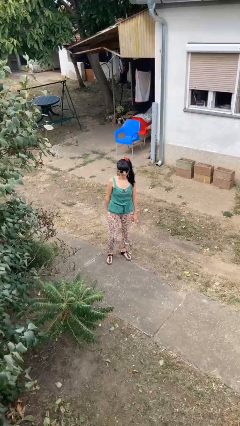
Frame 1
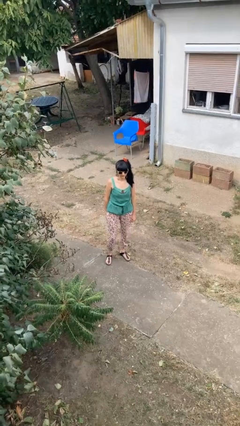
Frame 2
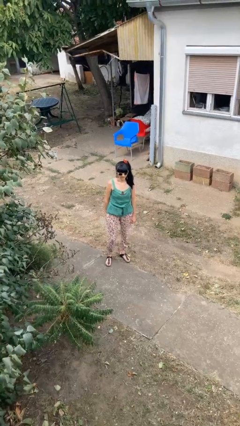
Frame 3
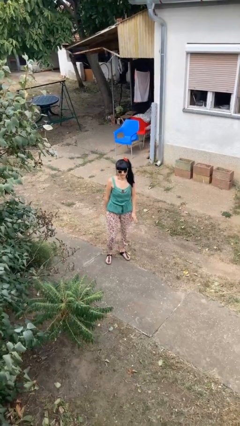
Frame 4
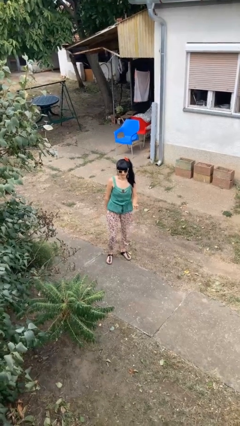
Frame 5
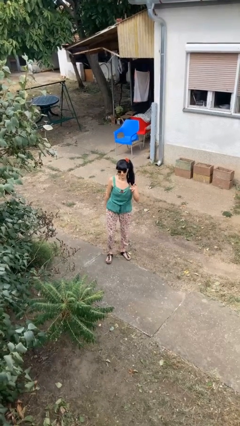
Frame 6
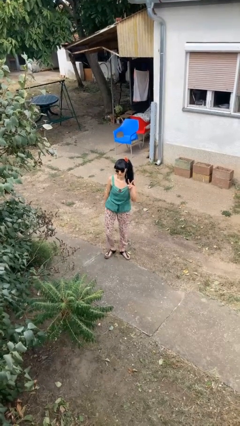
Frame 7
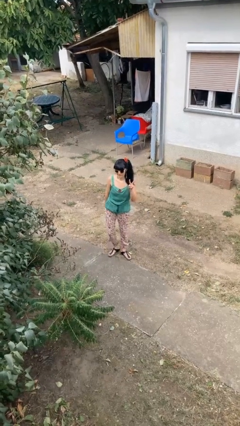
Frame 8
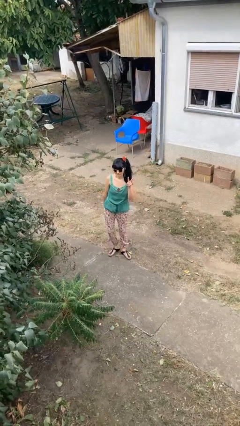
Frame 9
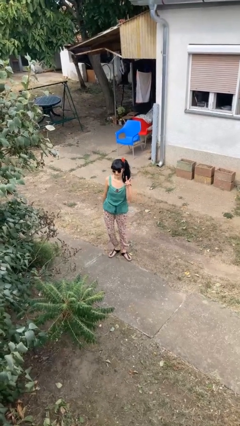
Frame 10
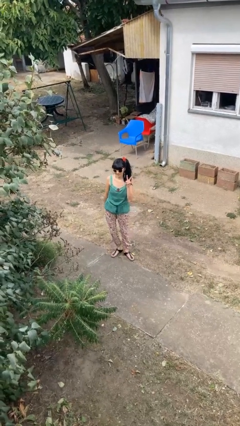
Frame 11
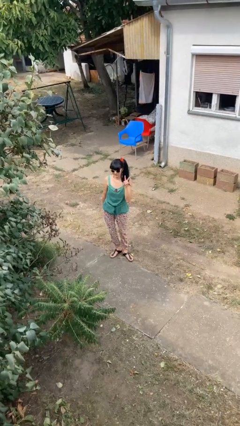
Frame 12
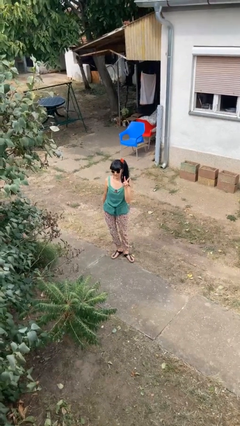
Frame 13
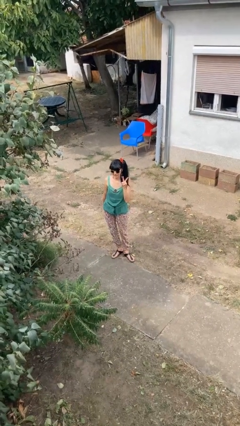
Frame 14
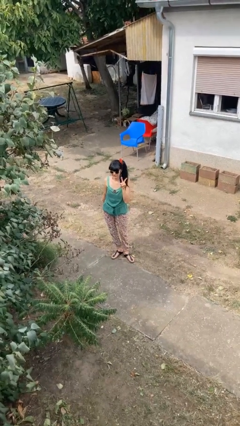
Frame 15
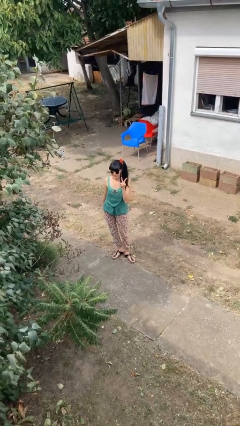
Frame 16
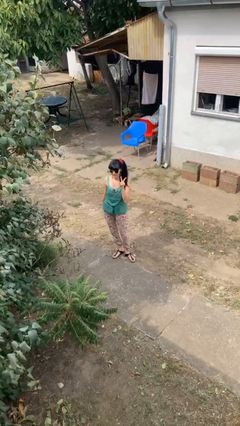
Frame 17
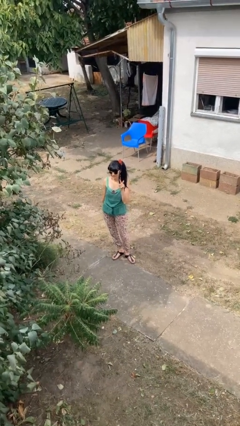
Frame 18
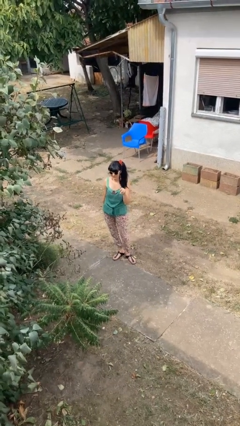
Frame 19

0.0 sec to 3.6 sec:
person gestures peace

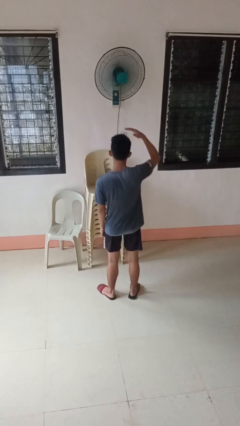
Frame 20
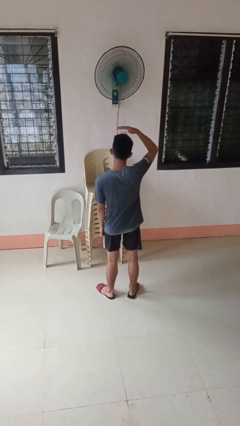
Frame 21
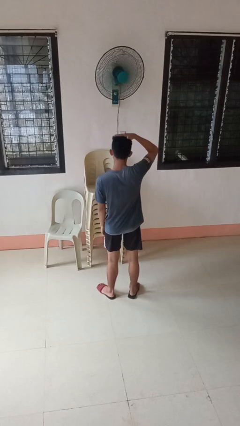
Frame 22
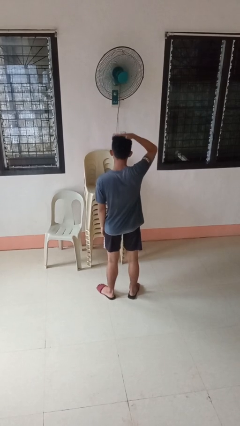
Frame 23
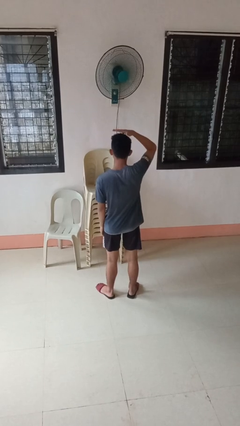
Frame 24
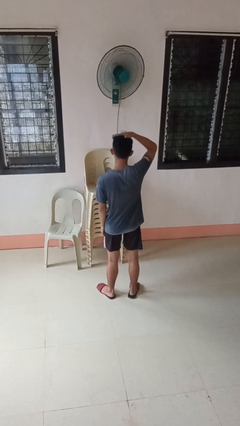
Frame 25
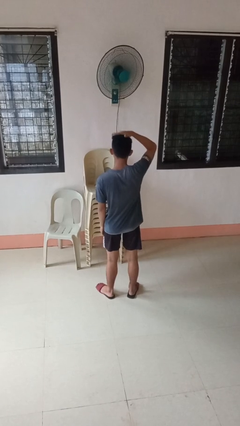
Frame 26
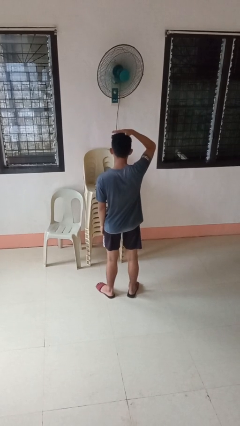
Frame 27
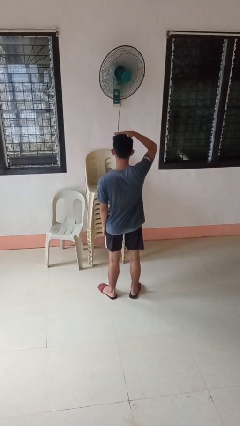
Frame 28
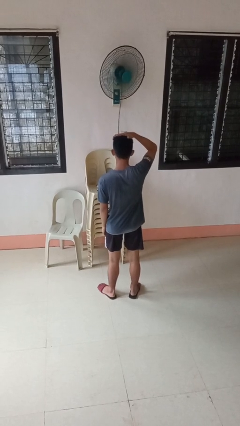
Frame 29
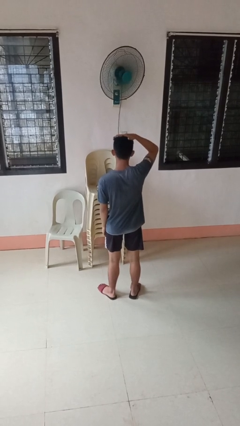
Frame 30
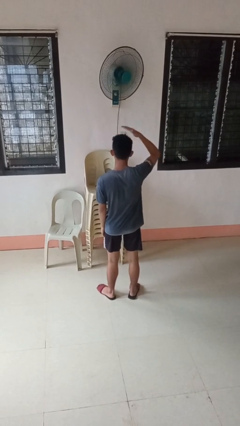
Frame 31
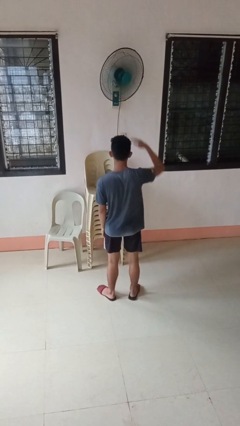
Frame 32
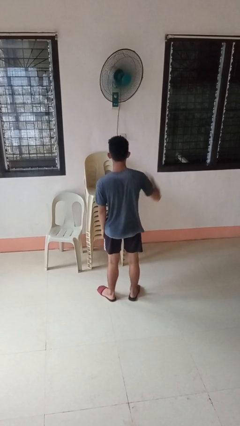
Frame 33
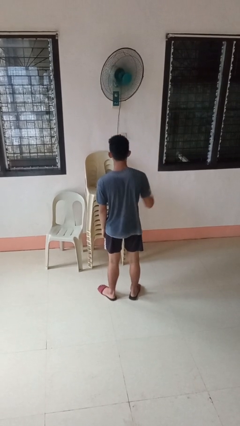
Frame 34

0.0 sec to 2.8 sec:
person pats head

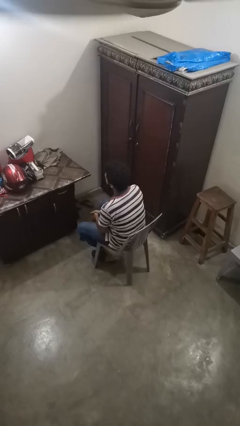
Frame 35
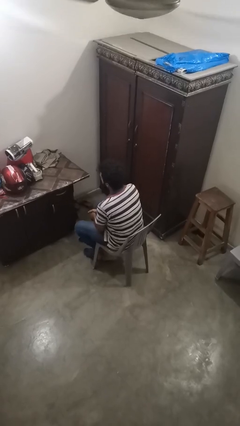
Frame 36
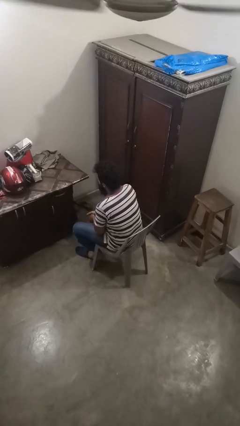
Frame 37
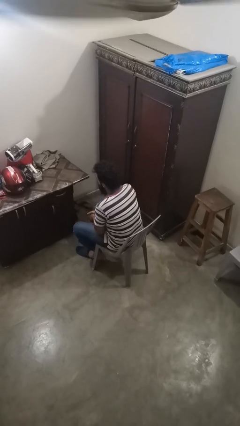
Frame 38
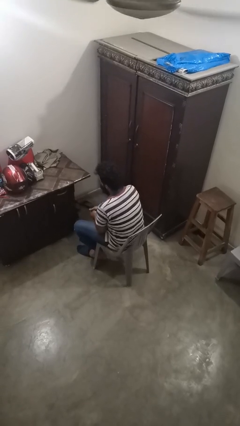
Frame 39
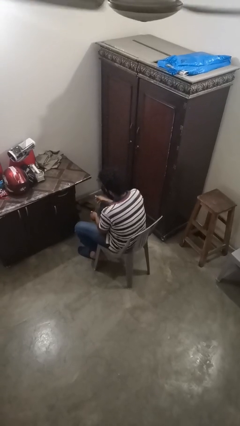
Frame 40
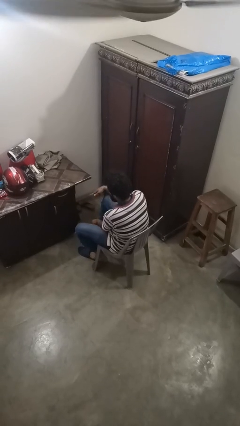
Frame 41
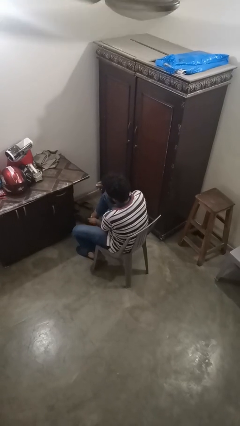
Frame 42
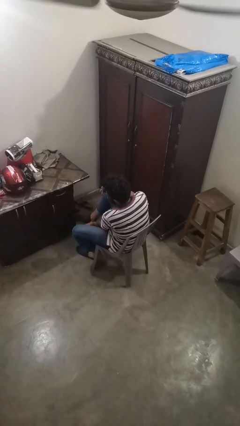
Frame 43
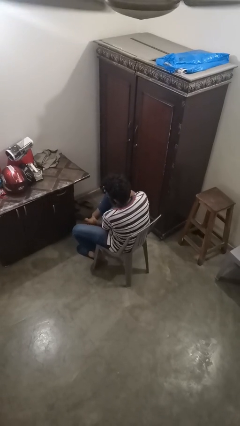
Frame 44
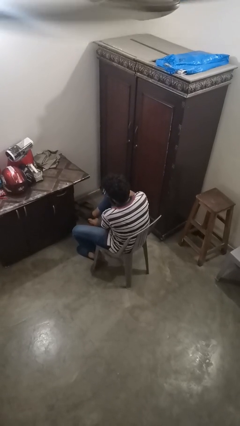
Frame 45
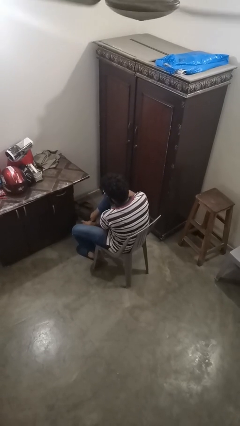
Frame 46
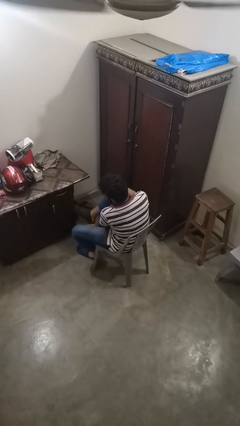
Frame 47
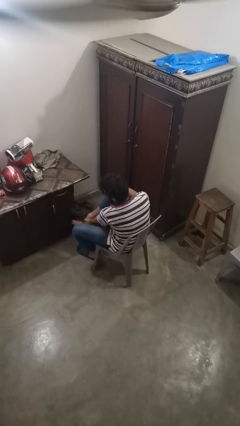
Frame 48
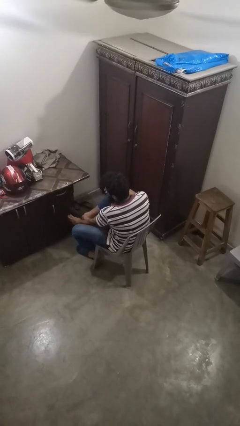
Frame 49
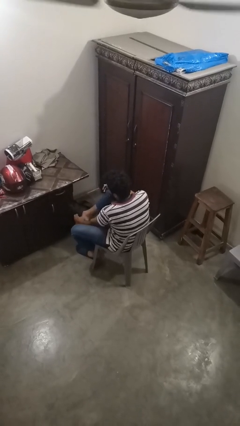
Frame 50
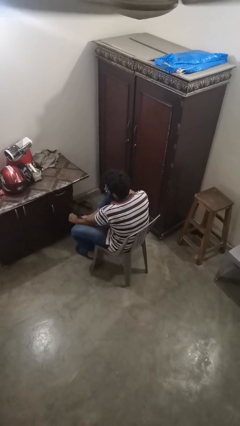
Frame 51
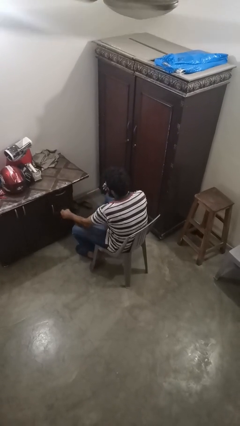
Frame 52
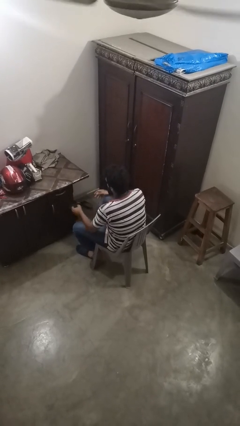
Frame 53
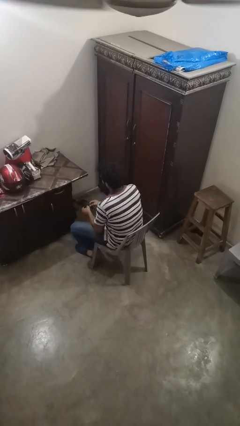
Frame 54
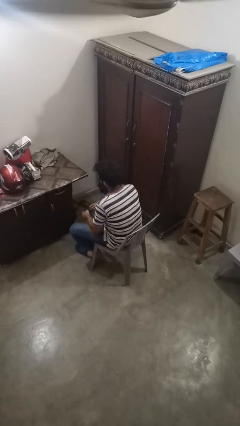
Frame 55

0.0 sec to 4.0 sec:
person takes off socks

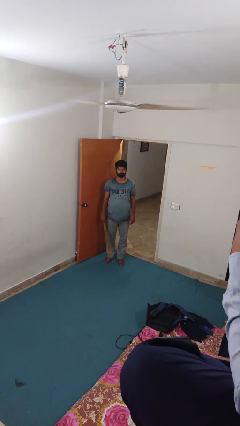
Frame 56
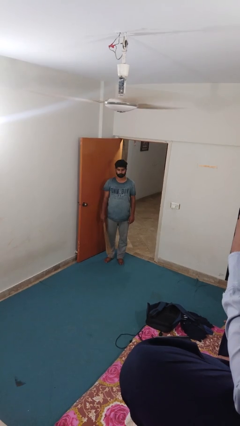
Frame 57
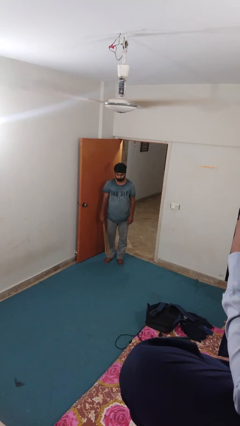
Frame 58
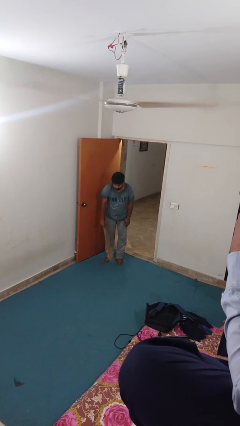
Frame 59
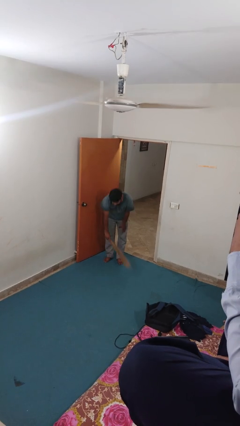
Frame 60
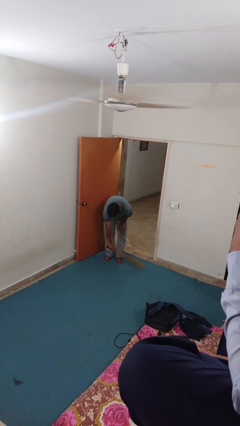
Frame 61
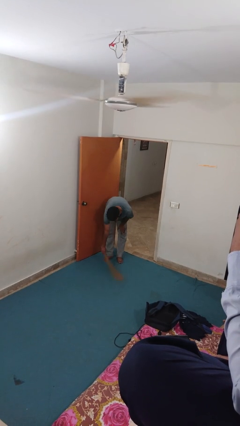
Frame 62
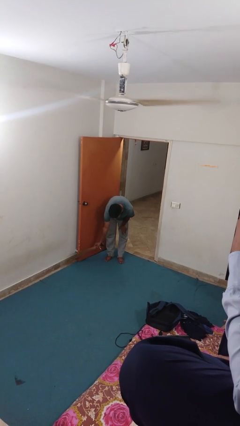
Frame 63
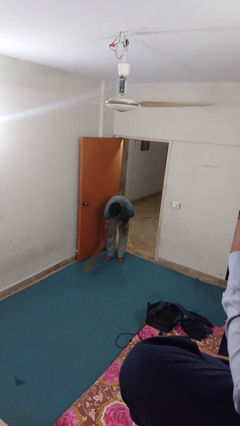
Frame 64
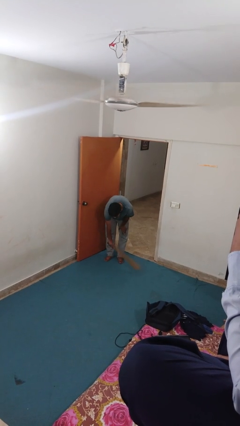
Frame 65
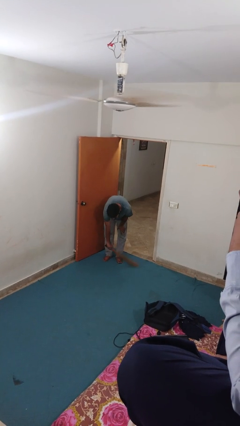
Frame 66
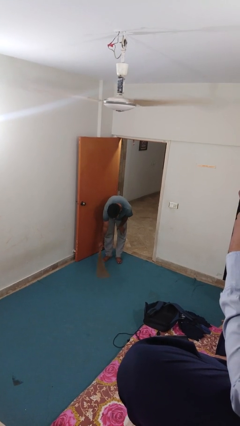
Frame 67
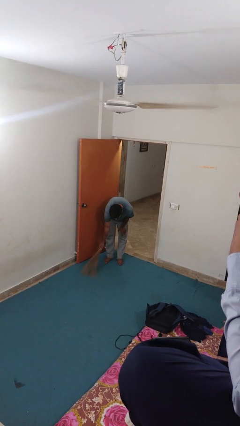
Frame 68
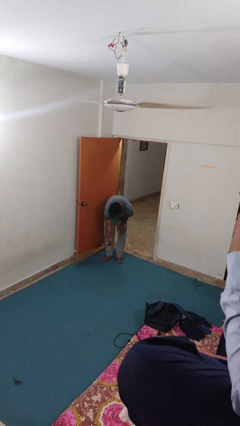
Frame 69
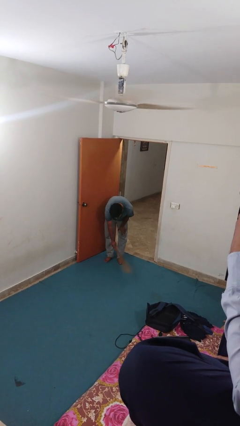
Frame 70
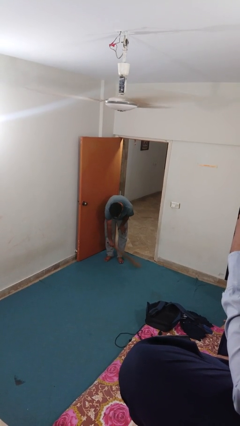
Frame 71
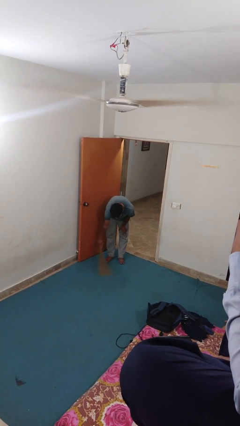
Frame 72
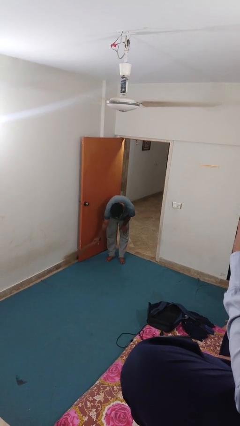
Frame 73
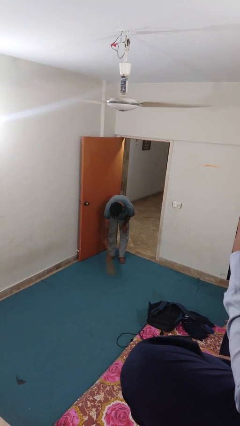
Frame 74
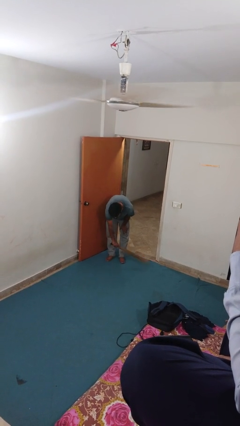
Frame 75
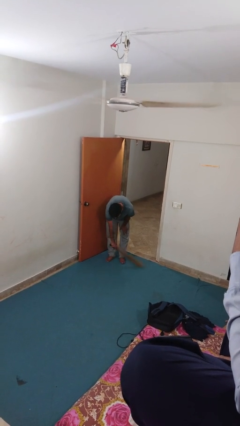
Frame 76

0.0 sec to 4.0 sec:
person sweeps floor

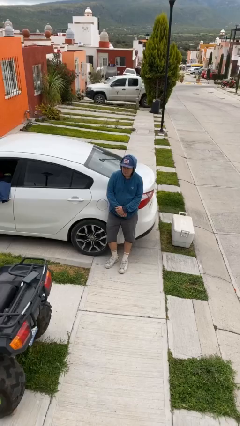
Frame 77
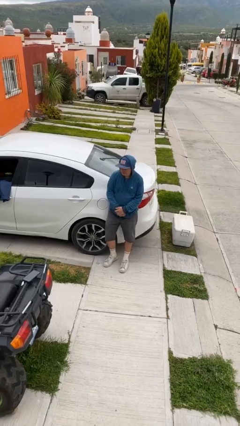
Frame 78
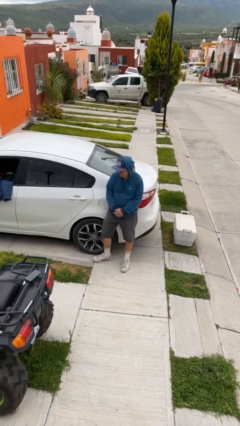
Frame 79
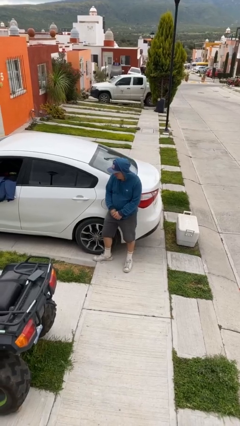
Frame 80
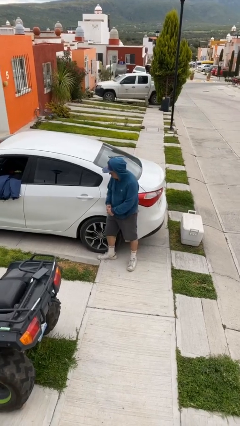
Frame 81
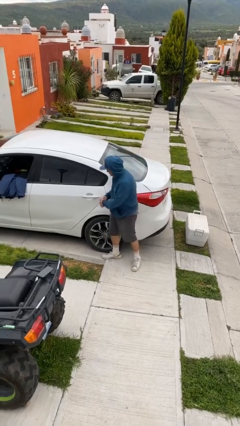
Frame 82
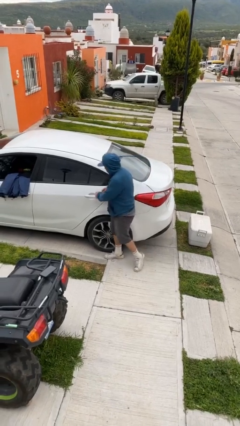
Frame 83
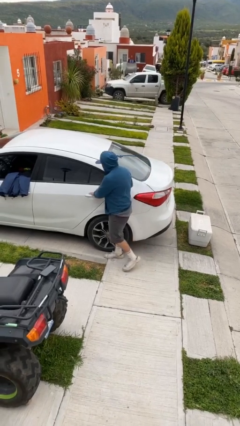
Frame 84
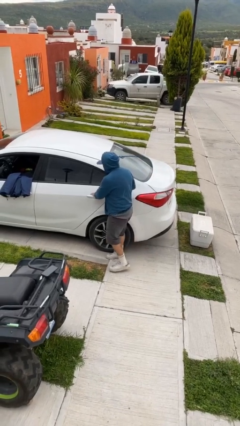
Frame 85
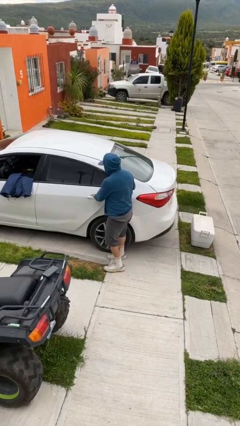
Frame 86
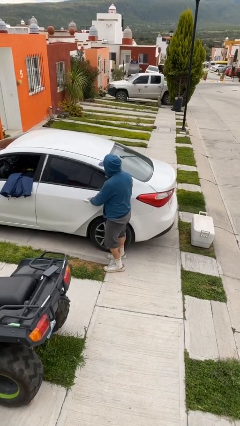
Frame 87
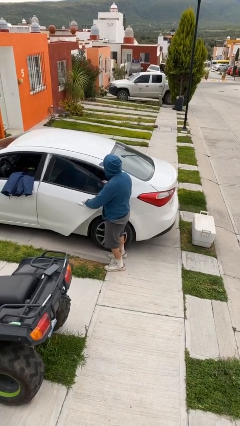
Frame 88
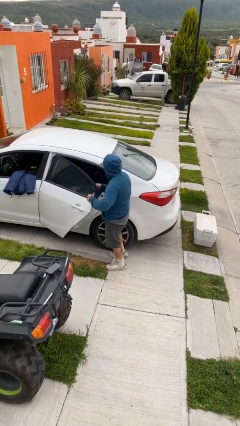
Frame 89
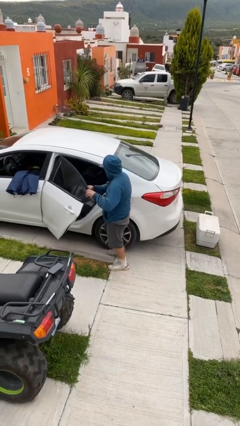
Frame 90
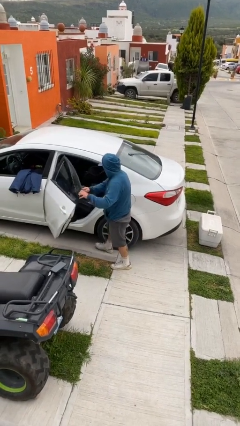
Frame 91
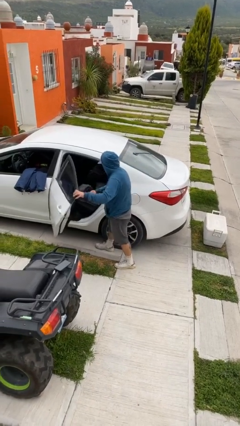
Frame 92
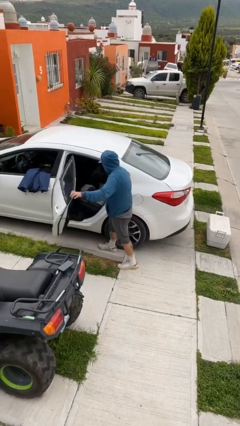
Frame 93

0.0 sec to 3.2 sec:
person opens car door

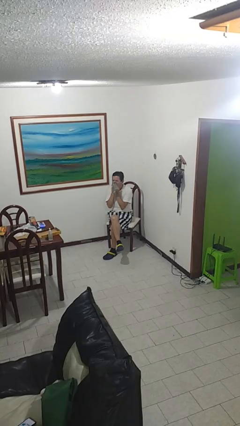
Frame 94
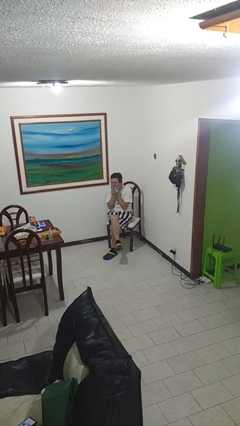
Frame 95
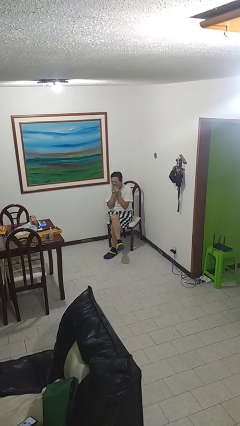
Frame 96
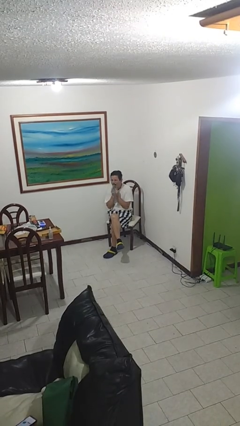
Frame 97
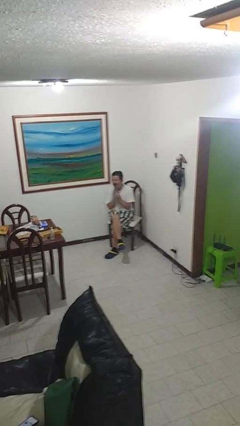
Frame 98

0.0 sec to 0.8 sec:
person blows nose
